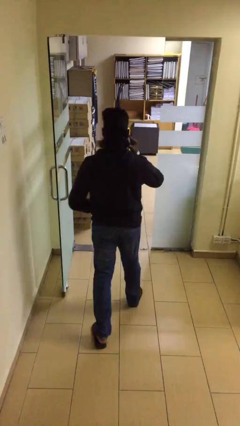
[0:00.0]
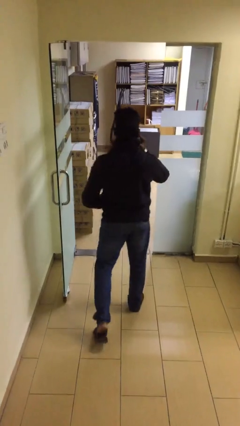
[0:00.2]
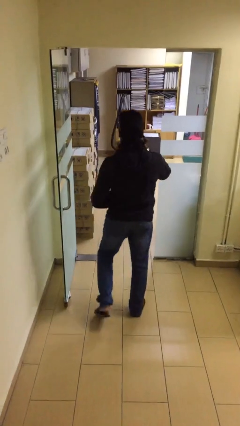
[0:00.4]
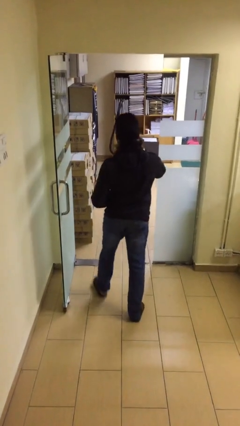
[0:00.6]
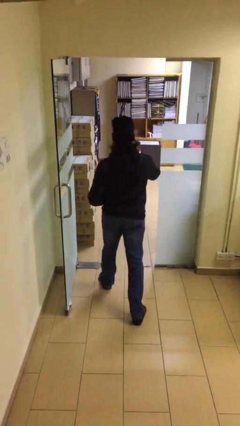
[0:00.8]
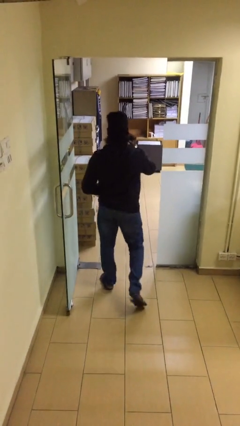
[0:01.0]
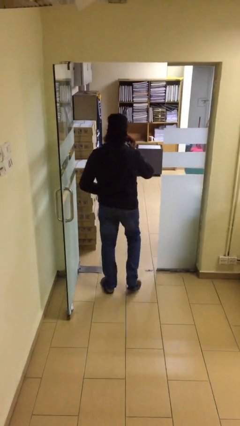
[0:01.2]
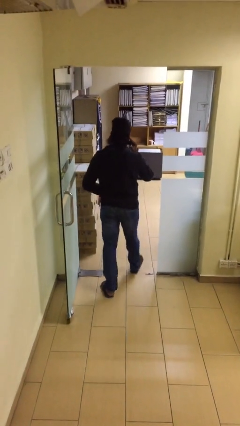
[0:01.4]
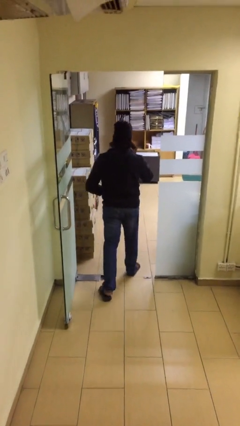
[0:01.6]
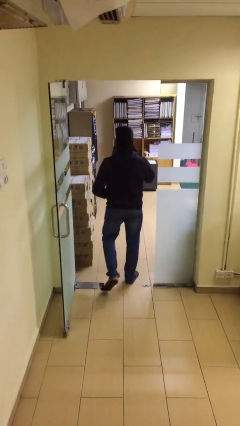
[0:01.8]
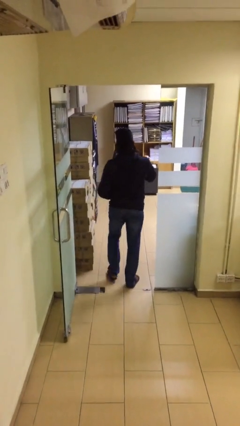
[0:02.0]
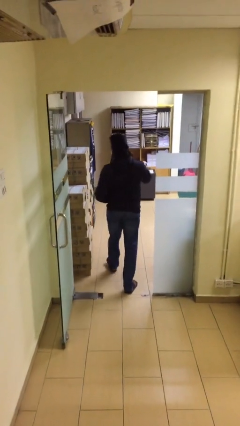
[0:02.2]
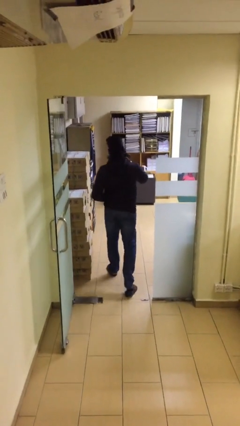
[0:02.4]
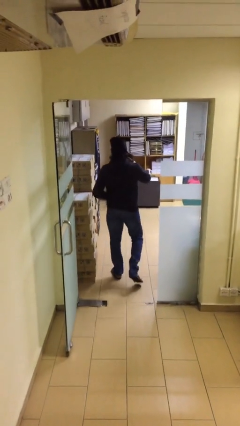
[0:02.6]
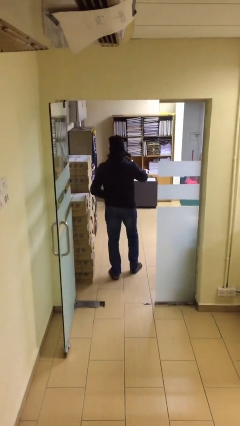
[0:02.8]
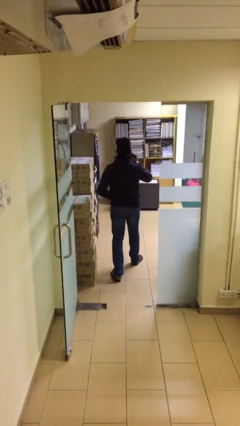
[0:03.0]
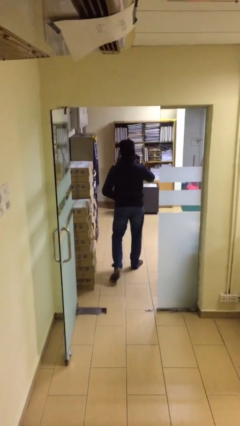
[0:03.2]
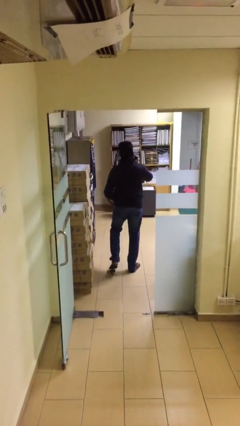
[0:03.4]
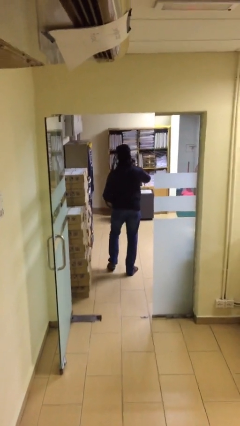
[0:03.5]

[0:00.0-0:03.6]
person exits scene through structure

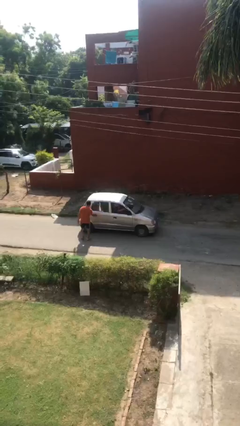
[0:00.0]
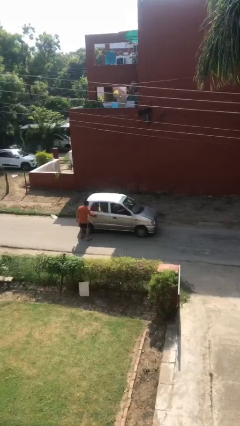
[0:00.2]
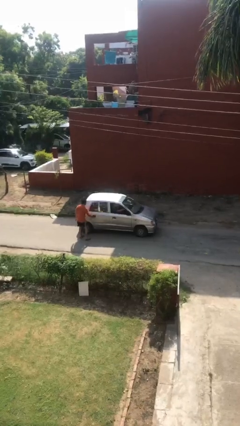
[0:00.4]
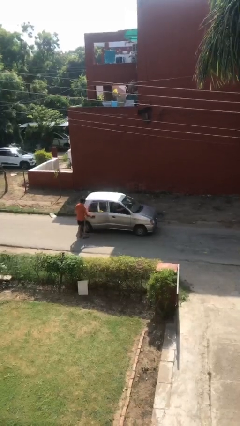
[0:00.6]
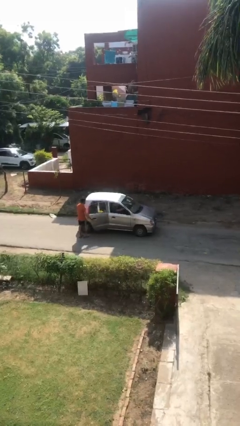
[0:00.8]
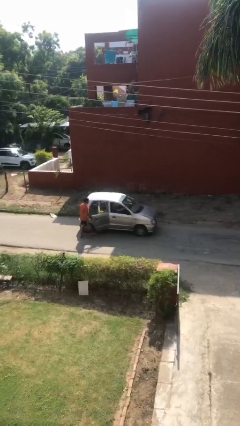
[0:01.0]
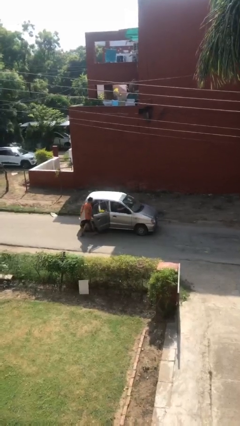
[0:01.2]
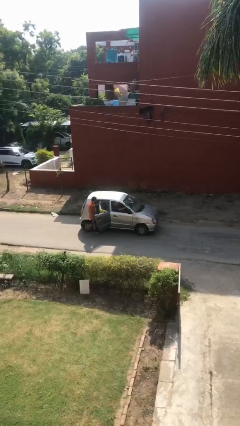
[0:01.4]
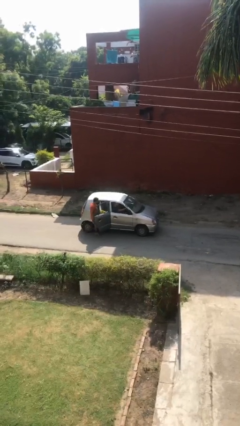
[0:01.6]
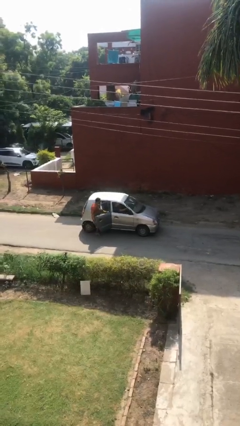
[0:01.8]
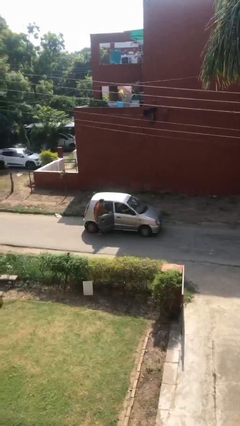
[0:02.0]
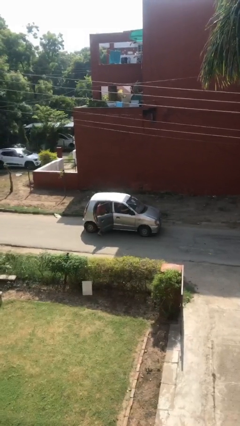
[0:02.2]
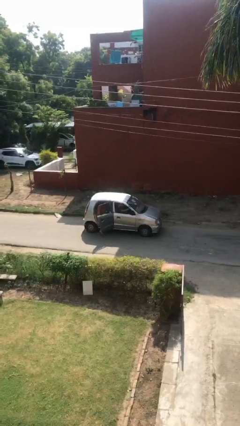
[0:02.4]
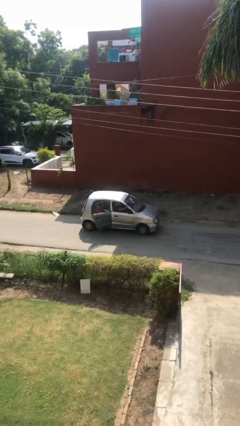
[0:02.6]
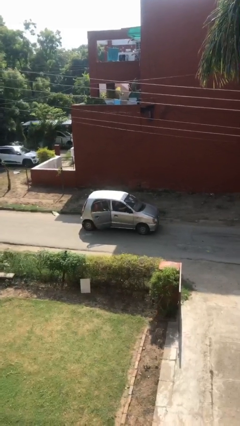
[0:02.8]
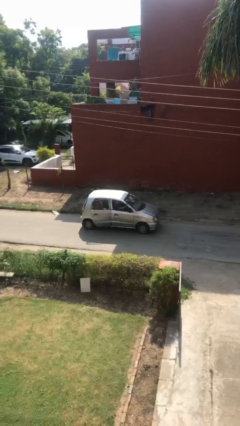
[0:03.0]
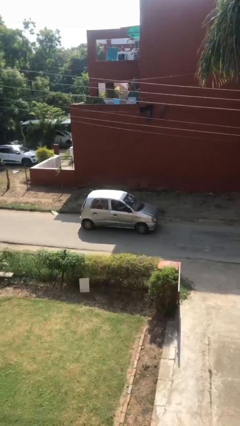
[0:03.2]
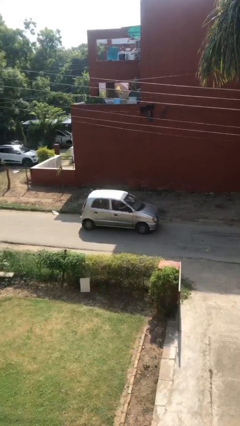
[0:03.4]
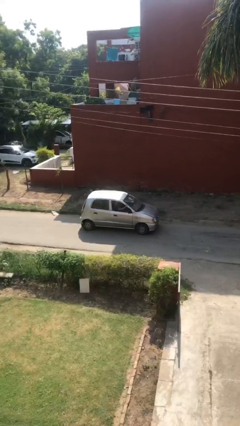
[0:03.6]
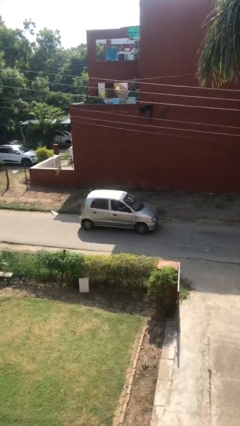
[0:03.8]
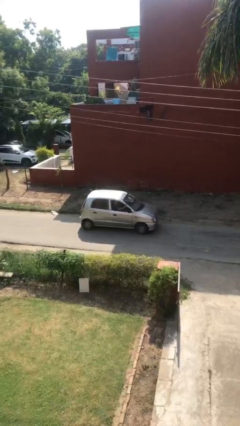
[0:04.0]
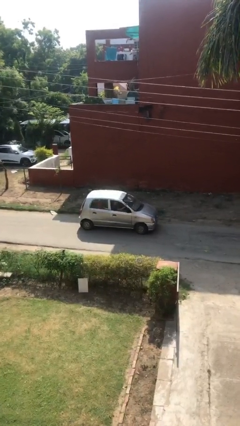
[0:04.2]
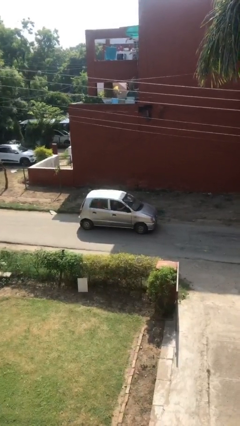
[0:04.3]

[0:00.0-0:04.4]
car picks up person

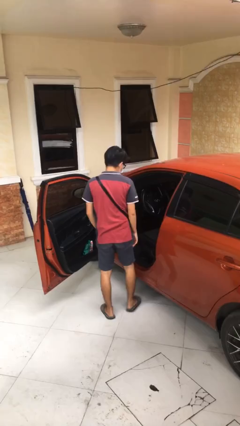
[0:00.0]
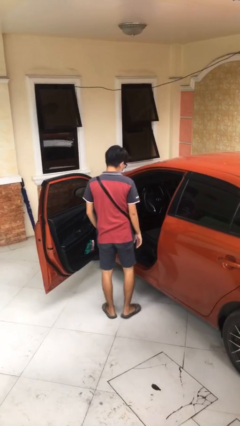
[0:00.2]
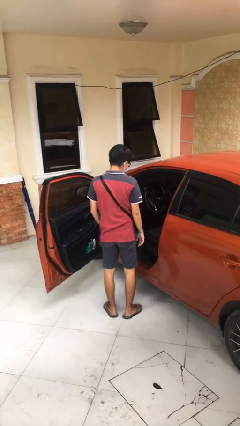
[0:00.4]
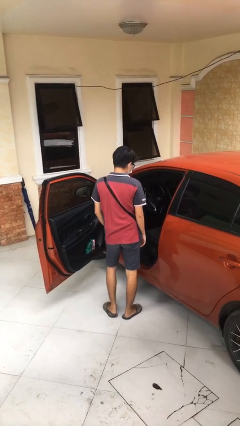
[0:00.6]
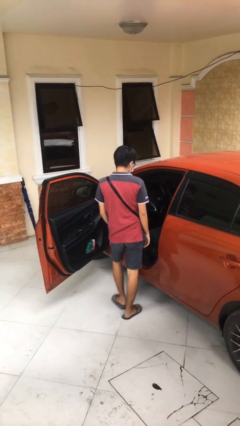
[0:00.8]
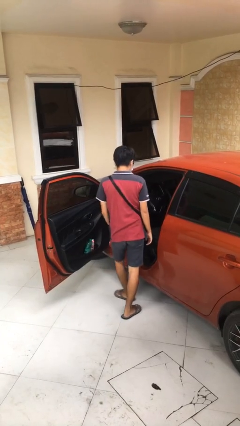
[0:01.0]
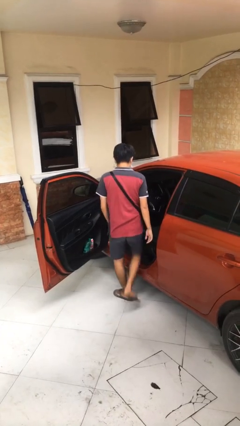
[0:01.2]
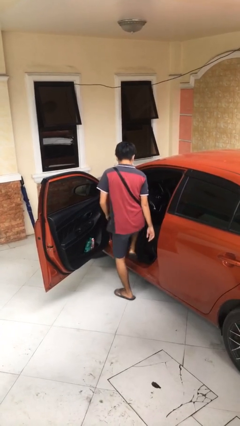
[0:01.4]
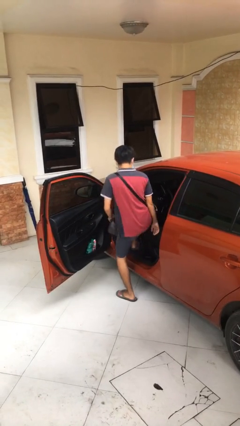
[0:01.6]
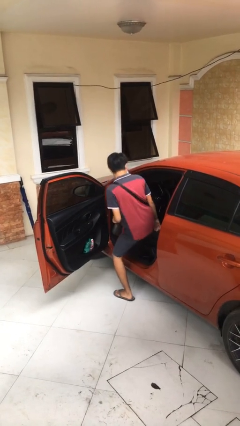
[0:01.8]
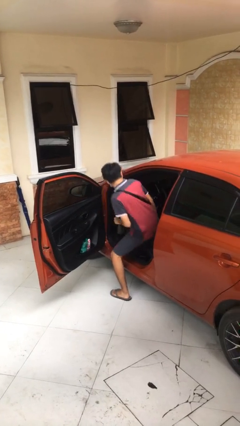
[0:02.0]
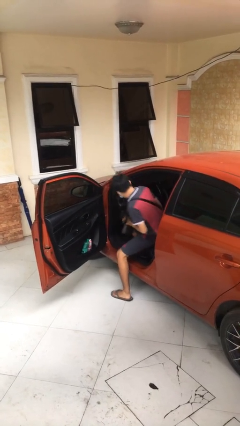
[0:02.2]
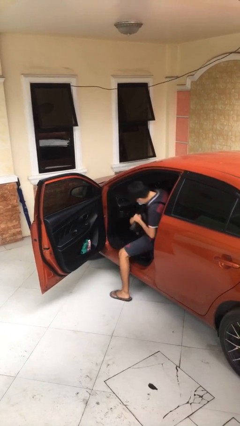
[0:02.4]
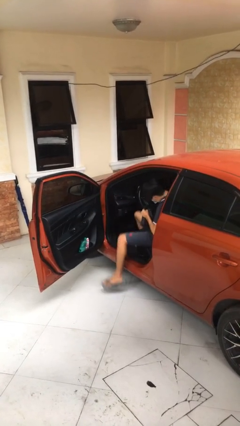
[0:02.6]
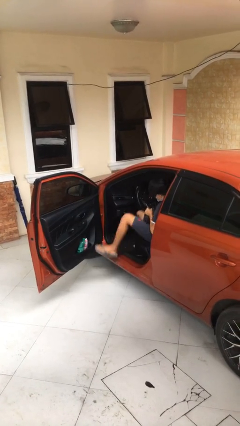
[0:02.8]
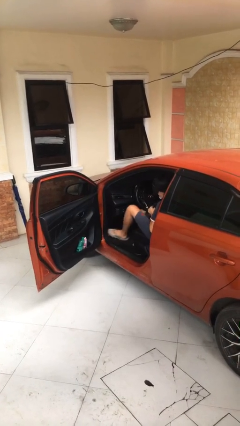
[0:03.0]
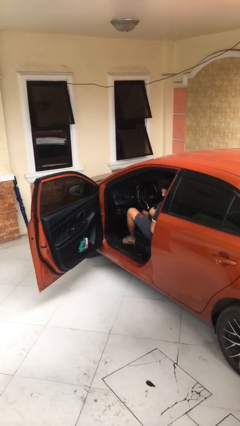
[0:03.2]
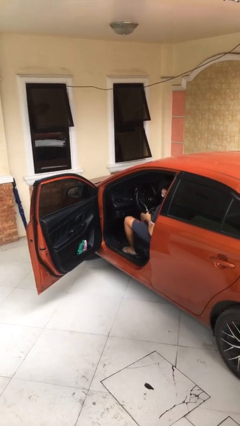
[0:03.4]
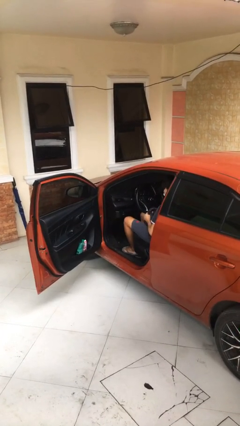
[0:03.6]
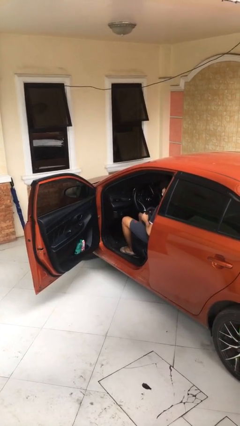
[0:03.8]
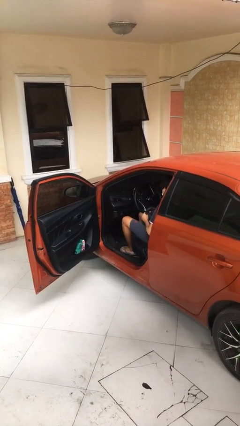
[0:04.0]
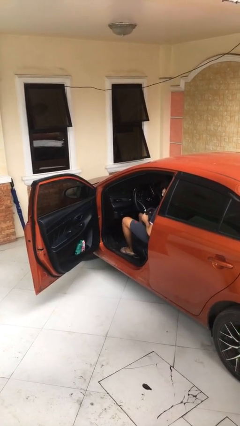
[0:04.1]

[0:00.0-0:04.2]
person enters car

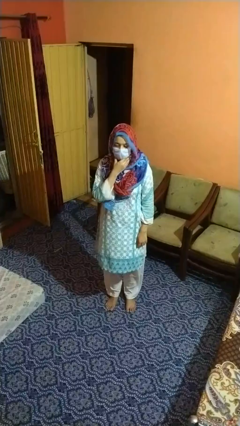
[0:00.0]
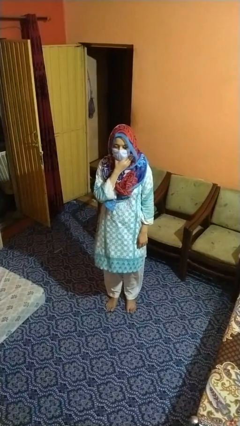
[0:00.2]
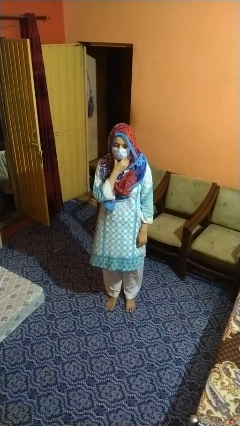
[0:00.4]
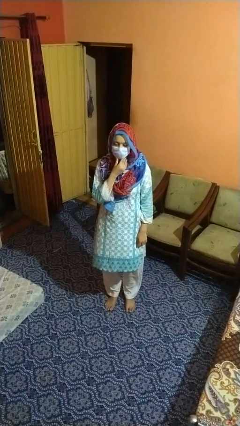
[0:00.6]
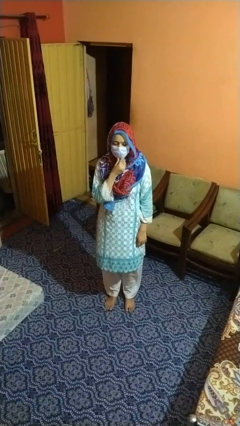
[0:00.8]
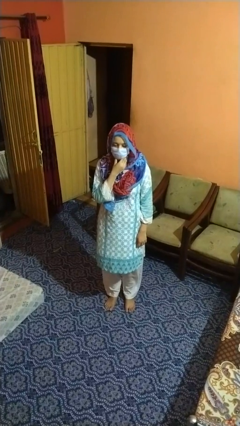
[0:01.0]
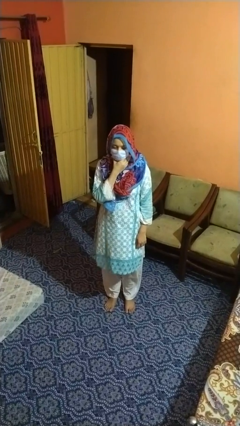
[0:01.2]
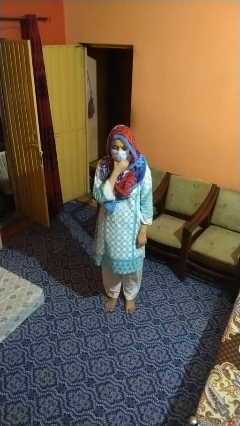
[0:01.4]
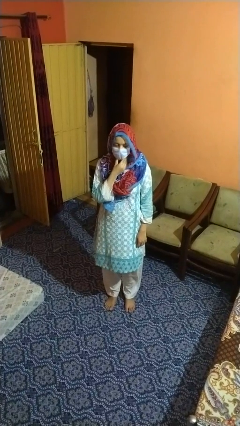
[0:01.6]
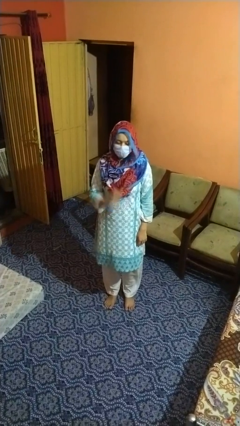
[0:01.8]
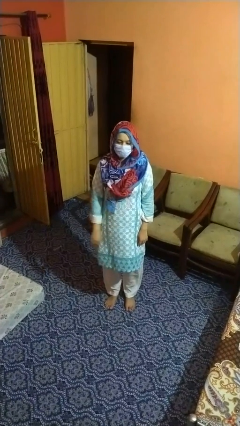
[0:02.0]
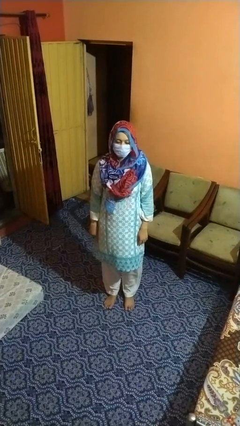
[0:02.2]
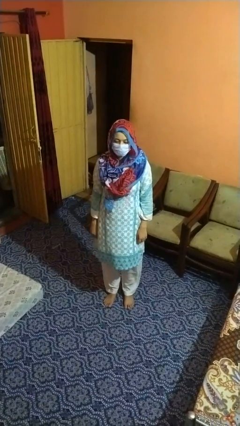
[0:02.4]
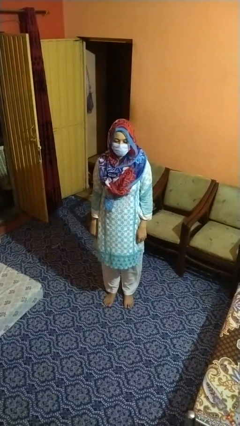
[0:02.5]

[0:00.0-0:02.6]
person strokes chin

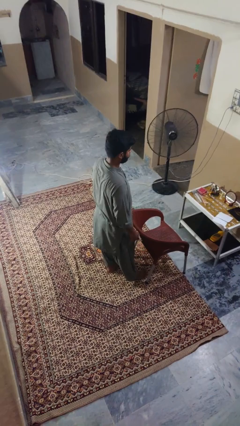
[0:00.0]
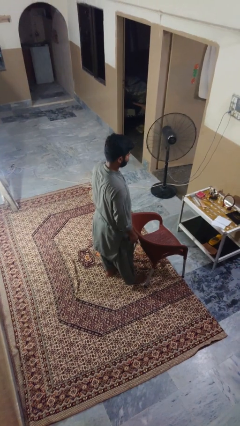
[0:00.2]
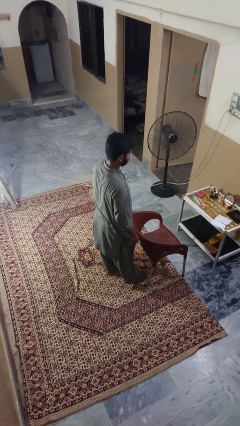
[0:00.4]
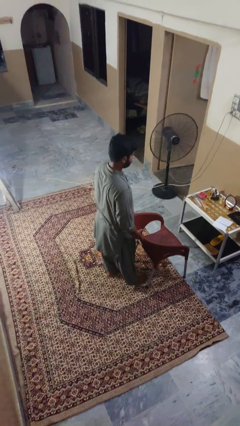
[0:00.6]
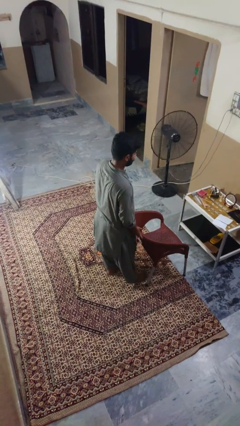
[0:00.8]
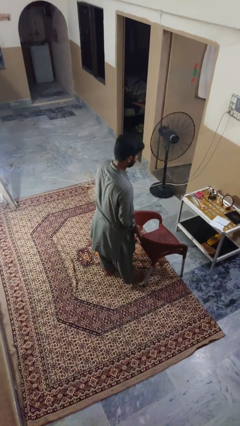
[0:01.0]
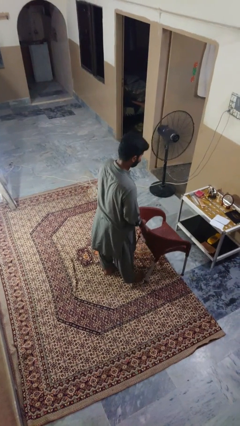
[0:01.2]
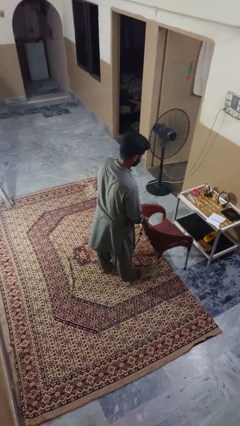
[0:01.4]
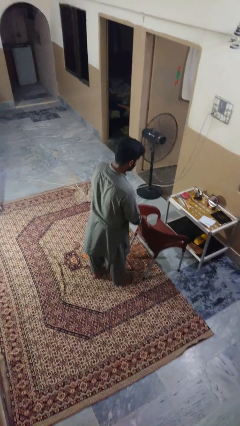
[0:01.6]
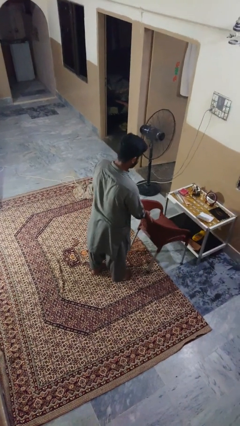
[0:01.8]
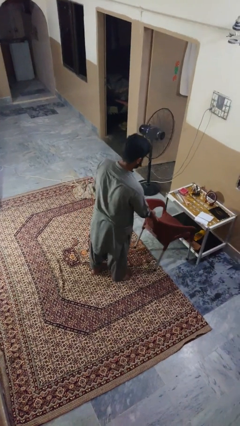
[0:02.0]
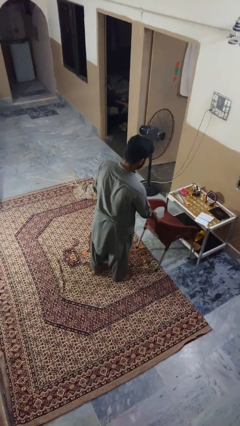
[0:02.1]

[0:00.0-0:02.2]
person pushes in chair

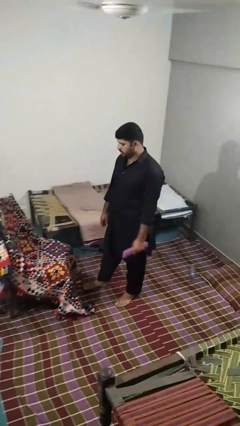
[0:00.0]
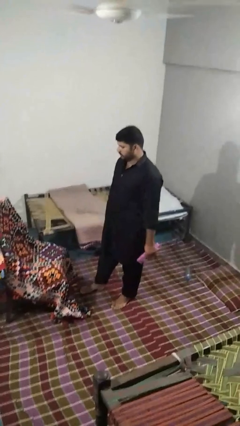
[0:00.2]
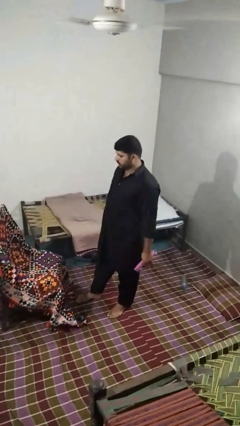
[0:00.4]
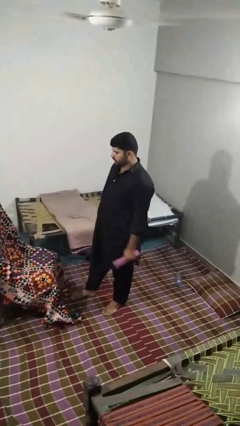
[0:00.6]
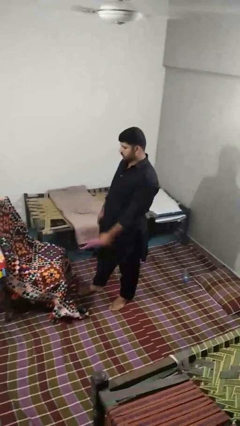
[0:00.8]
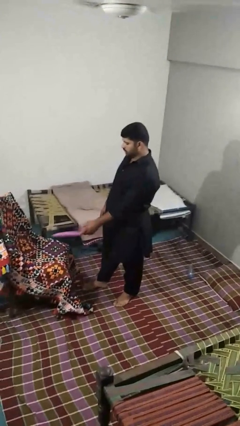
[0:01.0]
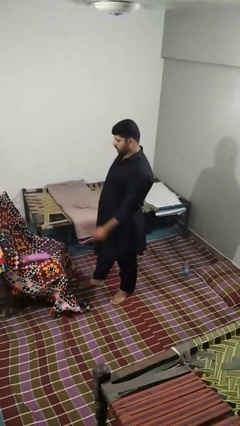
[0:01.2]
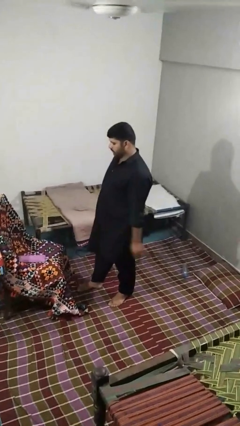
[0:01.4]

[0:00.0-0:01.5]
person puts down object on couch
